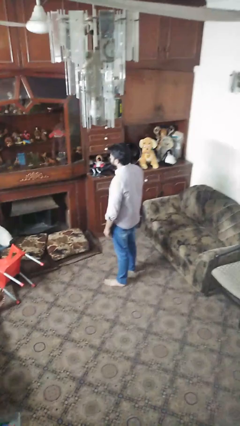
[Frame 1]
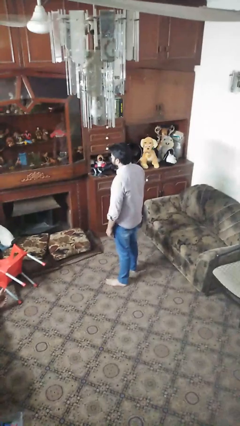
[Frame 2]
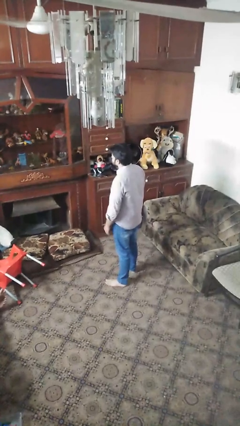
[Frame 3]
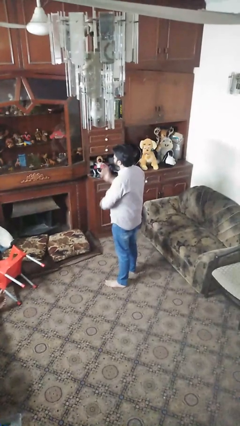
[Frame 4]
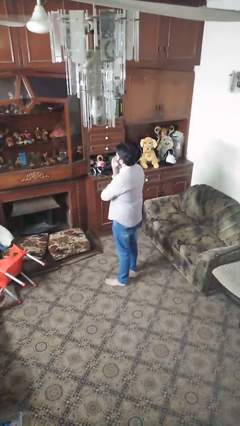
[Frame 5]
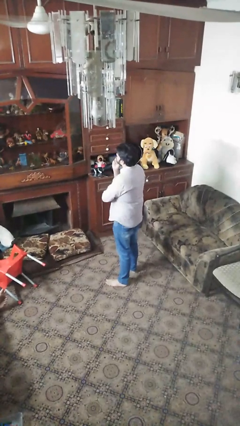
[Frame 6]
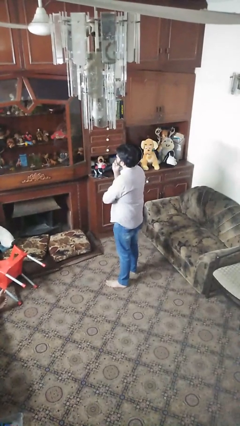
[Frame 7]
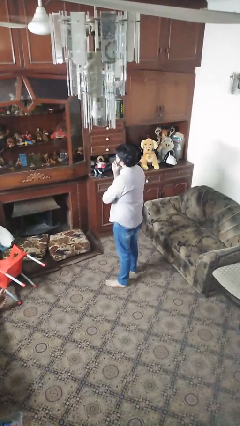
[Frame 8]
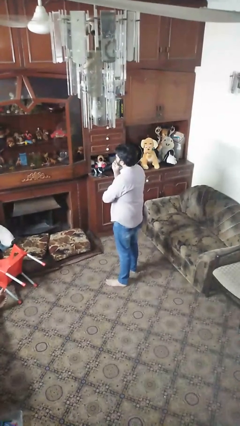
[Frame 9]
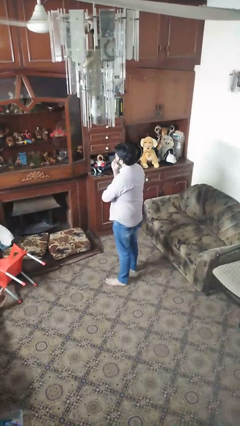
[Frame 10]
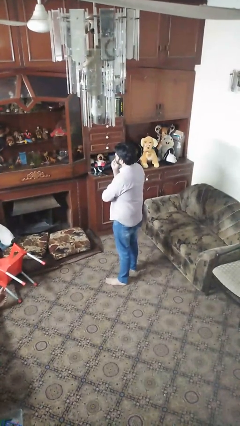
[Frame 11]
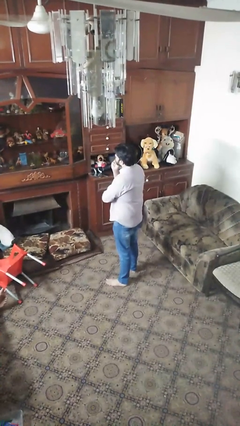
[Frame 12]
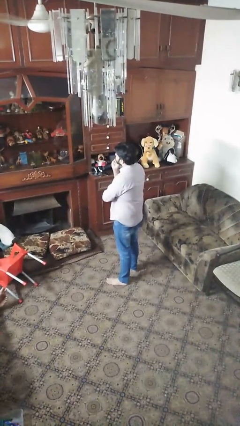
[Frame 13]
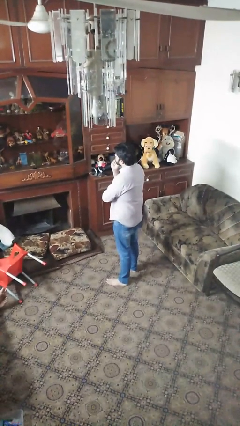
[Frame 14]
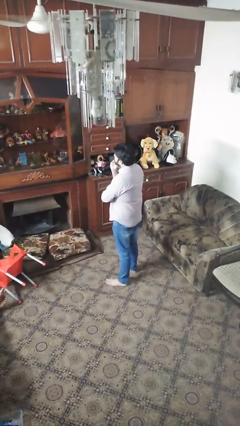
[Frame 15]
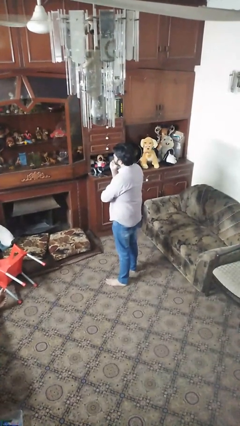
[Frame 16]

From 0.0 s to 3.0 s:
person strokes chin

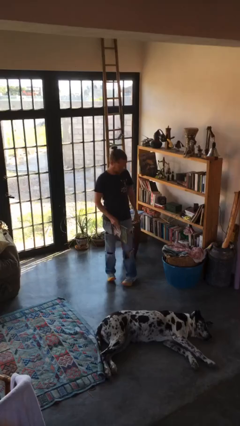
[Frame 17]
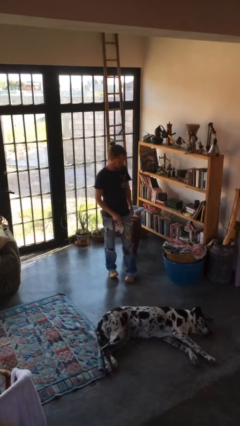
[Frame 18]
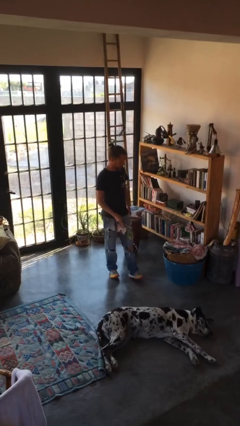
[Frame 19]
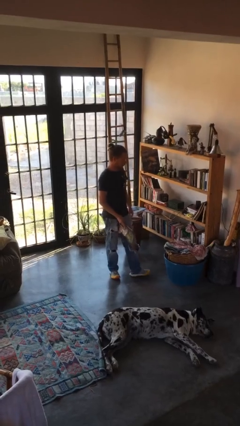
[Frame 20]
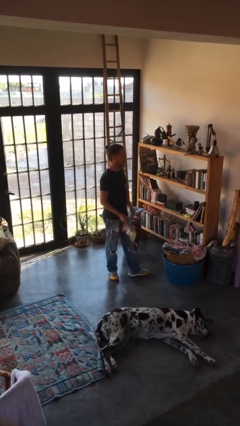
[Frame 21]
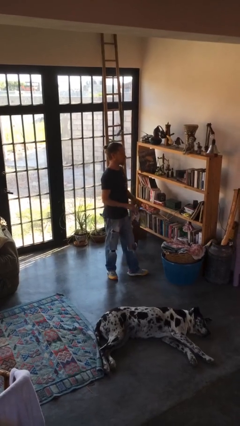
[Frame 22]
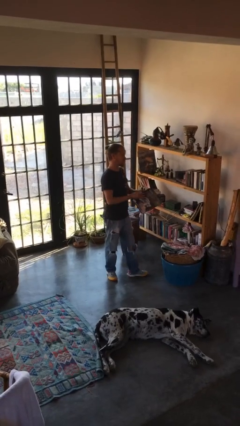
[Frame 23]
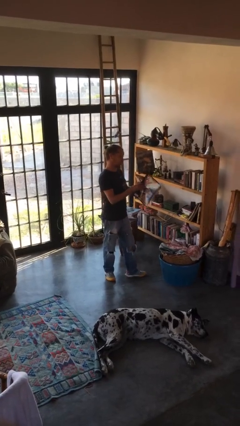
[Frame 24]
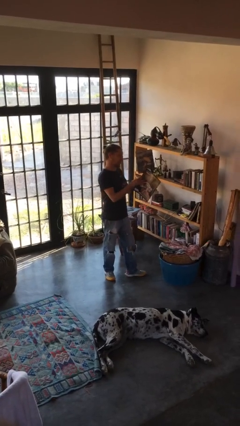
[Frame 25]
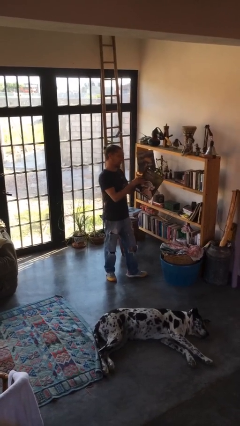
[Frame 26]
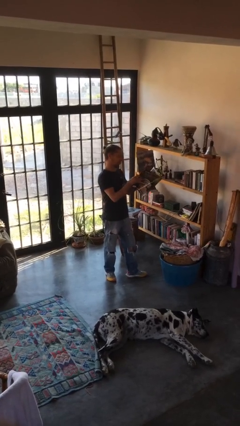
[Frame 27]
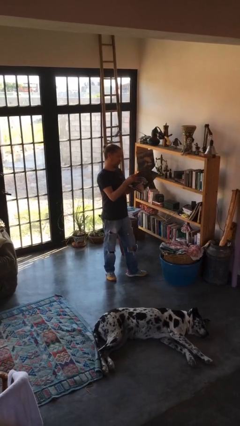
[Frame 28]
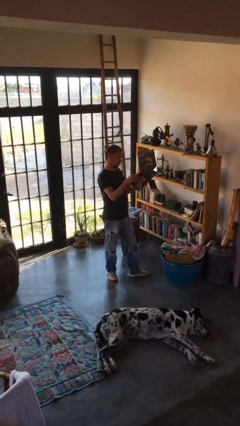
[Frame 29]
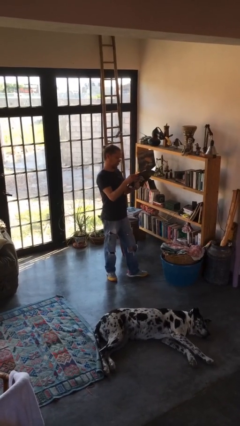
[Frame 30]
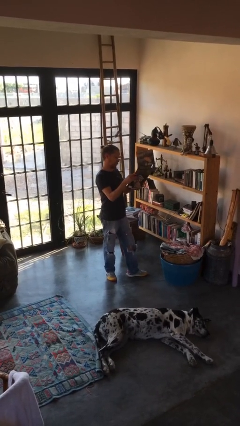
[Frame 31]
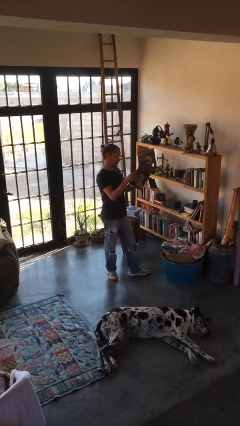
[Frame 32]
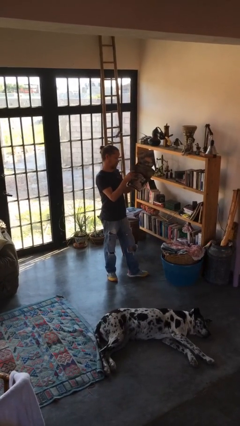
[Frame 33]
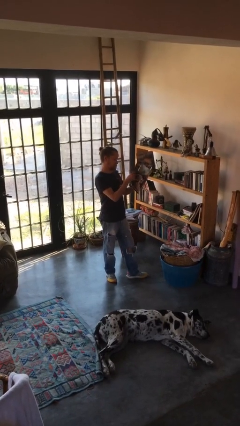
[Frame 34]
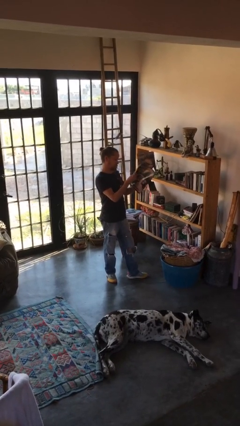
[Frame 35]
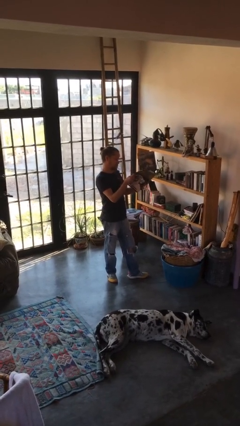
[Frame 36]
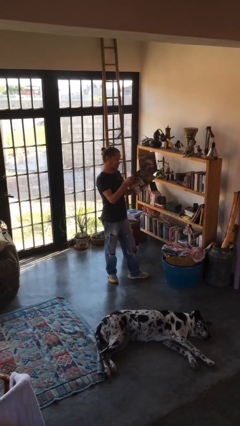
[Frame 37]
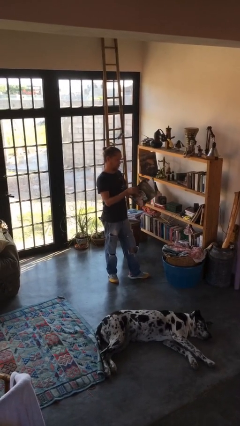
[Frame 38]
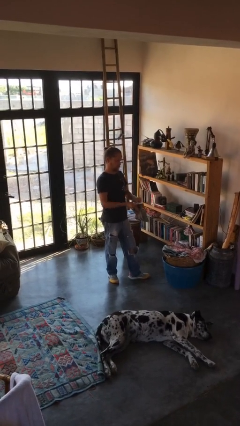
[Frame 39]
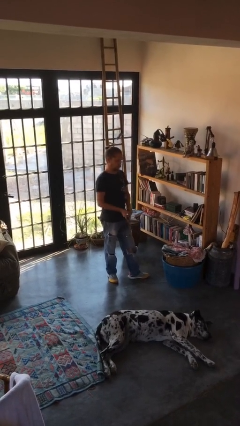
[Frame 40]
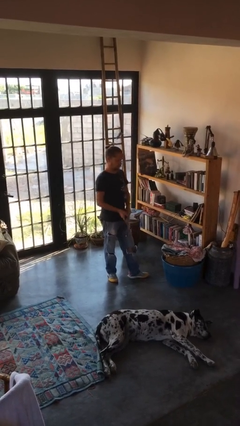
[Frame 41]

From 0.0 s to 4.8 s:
person reads magazine

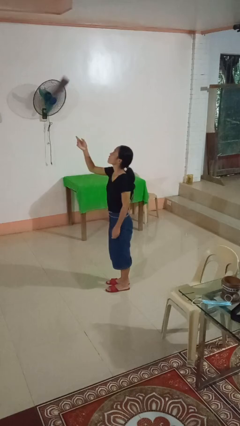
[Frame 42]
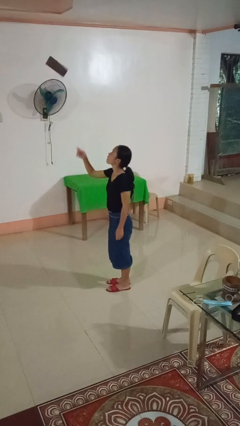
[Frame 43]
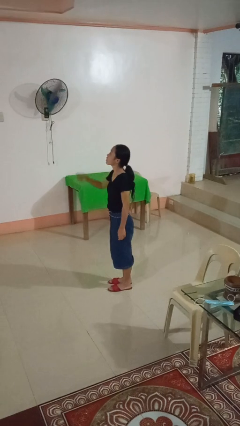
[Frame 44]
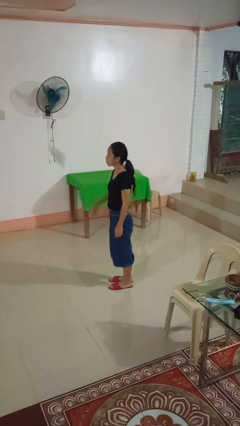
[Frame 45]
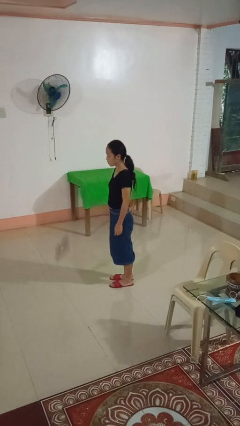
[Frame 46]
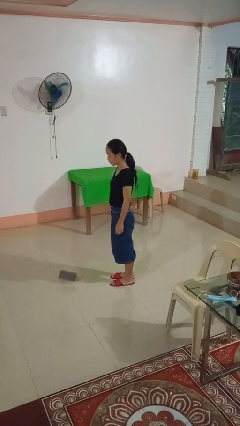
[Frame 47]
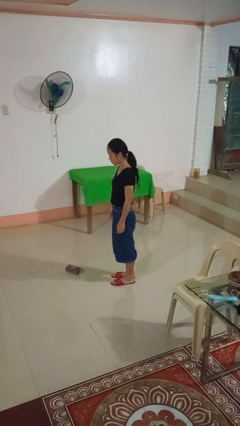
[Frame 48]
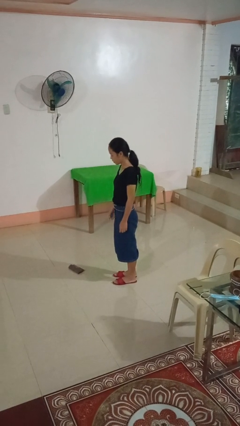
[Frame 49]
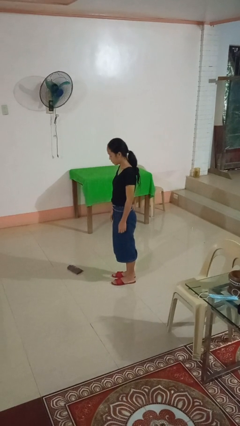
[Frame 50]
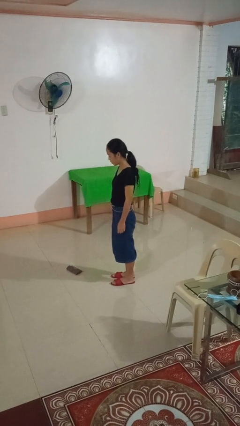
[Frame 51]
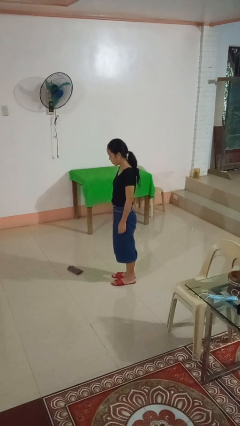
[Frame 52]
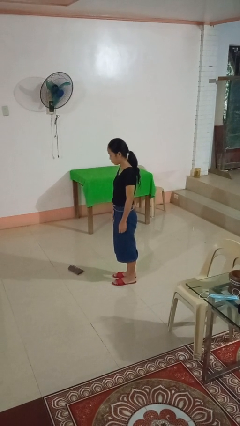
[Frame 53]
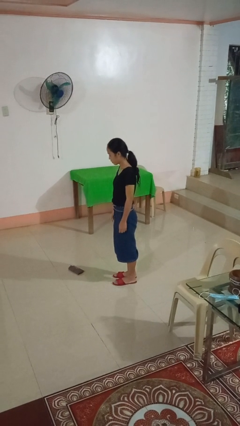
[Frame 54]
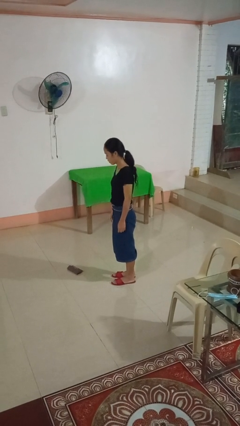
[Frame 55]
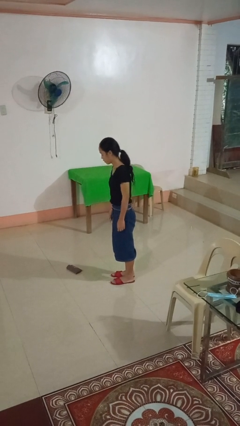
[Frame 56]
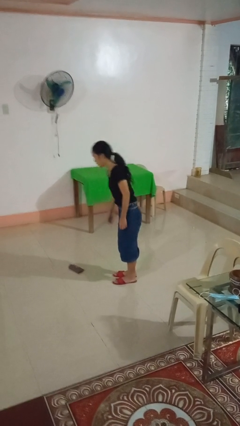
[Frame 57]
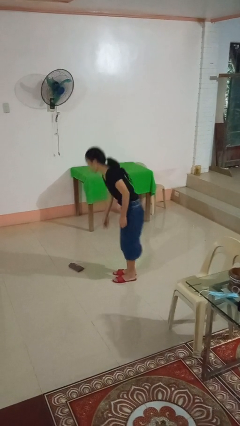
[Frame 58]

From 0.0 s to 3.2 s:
person throws object into air

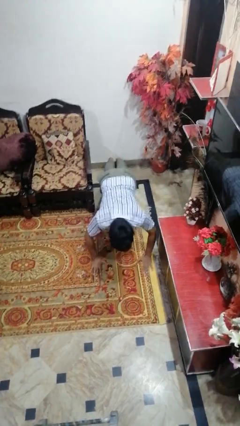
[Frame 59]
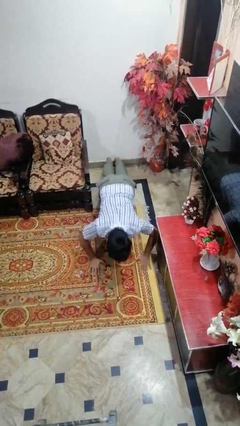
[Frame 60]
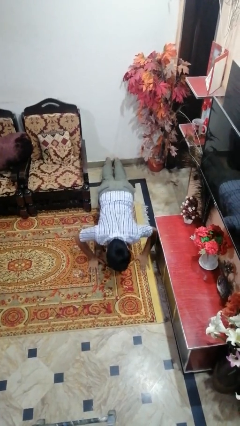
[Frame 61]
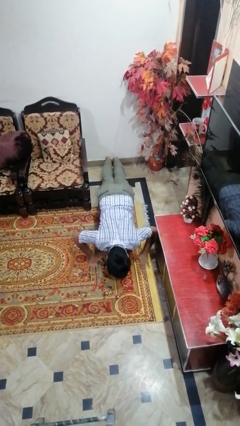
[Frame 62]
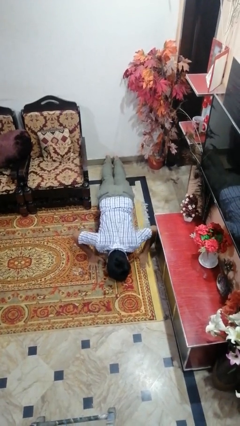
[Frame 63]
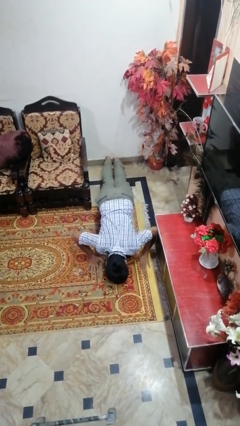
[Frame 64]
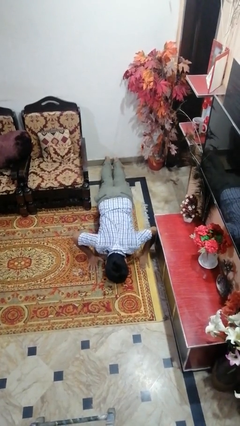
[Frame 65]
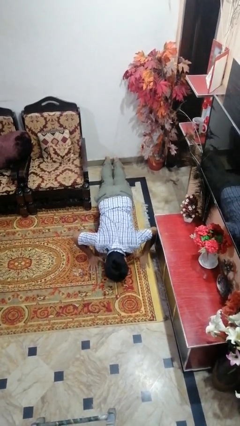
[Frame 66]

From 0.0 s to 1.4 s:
person exercises with pushup

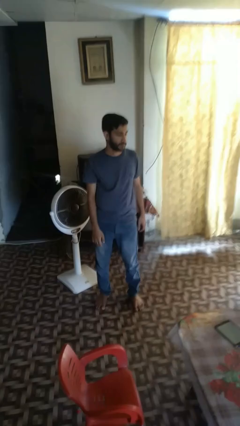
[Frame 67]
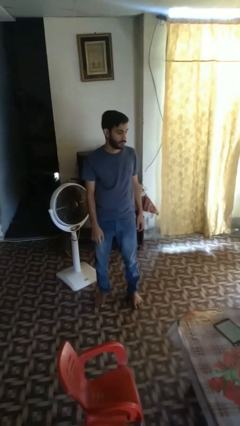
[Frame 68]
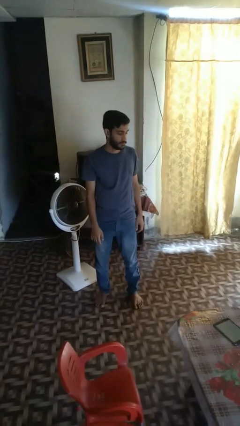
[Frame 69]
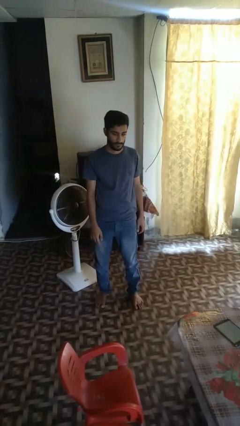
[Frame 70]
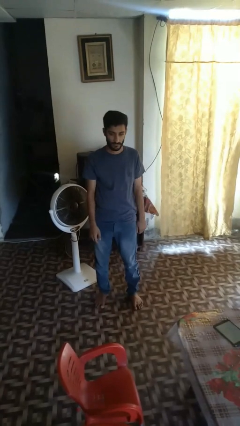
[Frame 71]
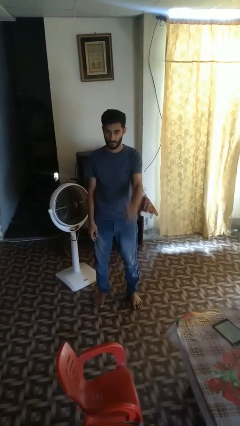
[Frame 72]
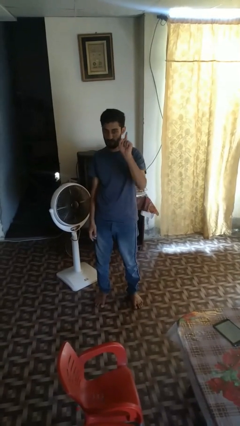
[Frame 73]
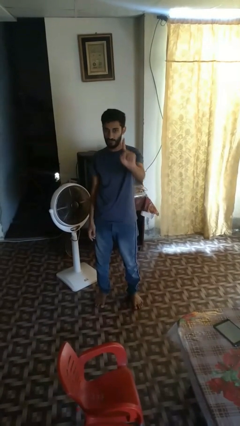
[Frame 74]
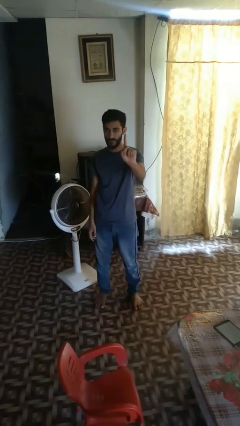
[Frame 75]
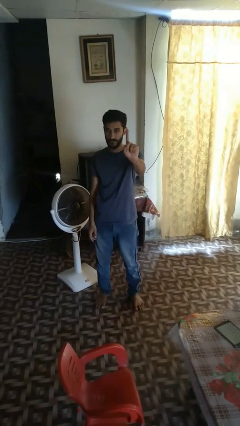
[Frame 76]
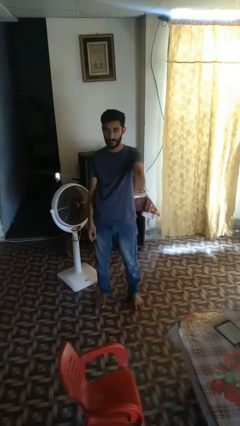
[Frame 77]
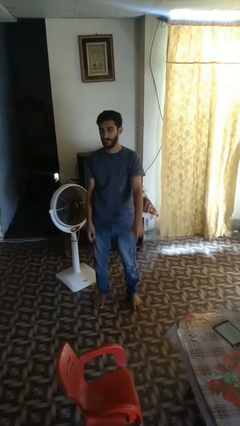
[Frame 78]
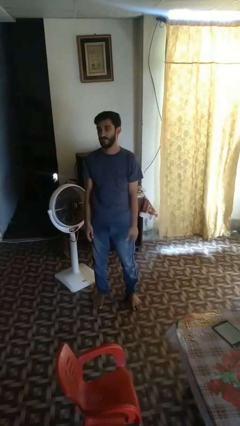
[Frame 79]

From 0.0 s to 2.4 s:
person gestures number one

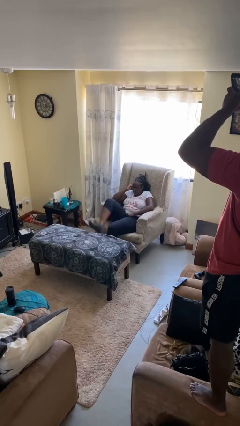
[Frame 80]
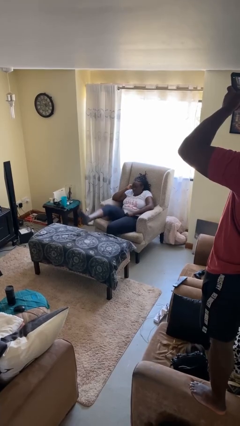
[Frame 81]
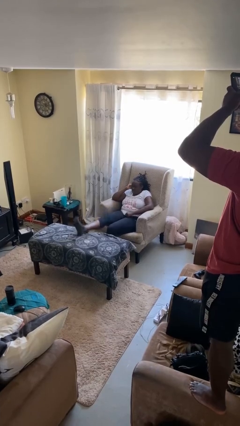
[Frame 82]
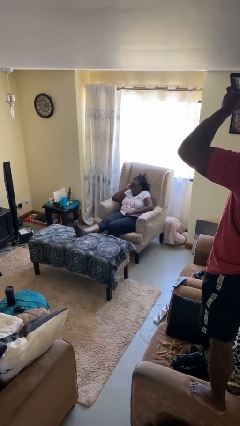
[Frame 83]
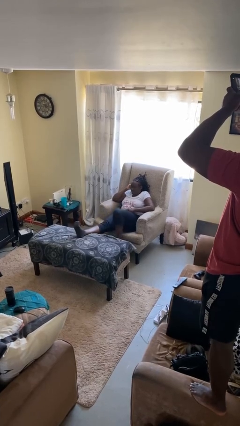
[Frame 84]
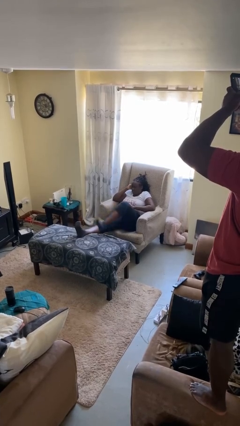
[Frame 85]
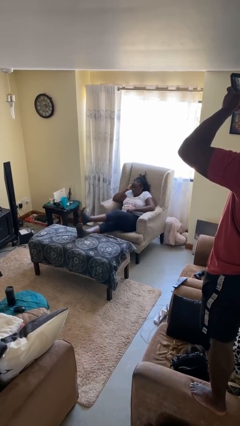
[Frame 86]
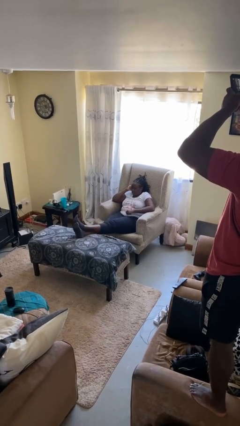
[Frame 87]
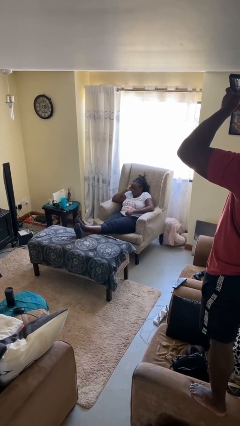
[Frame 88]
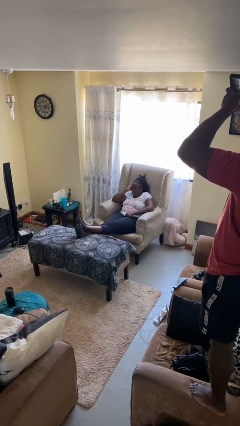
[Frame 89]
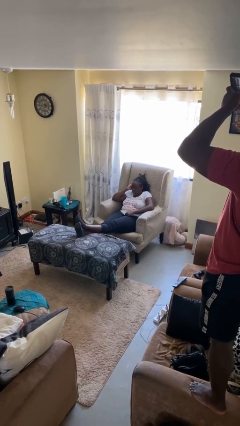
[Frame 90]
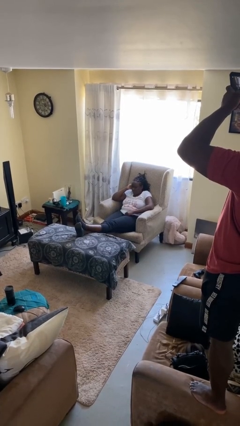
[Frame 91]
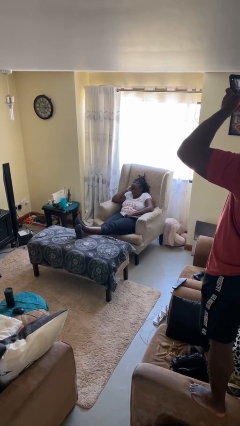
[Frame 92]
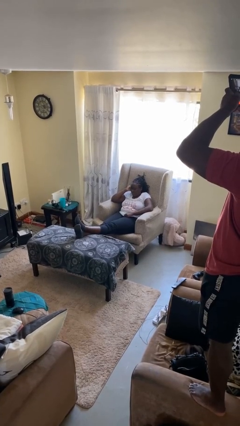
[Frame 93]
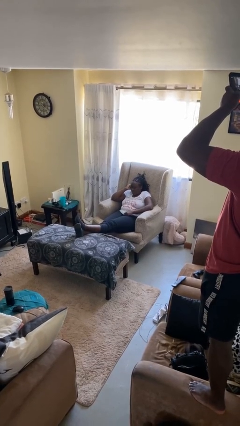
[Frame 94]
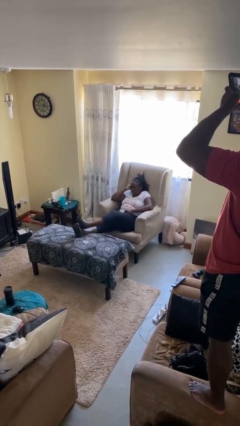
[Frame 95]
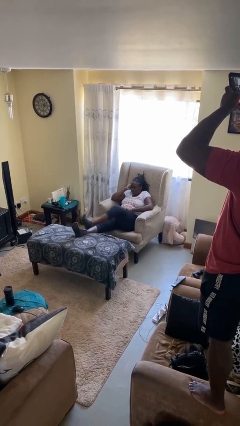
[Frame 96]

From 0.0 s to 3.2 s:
person puts feet up
